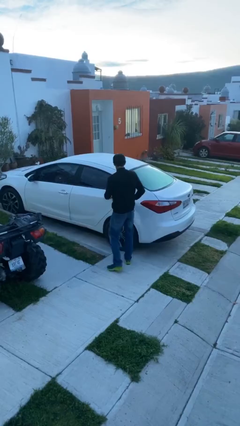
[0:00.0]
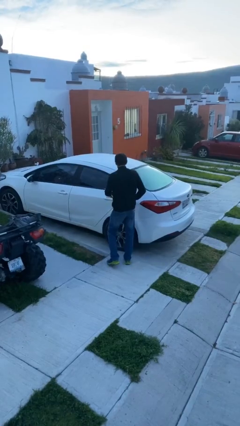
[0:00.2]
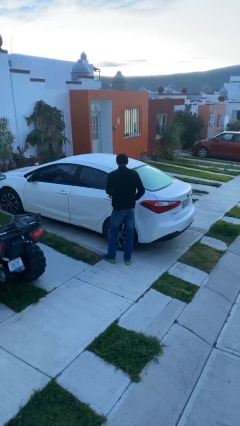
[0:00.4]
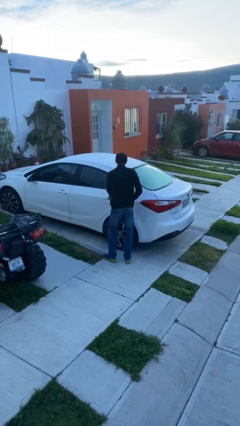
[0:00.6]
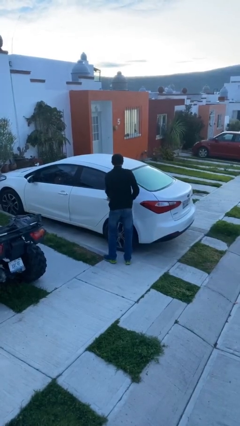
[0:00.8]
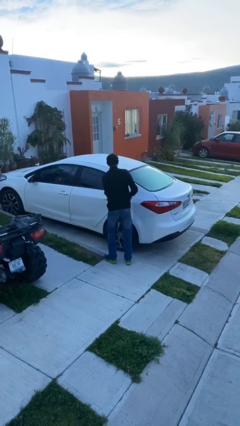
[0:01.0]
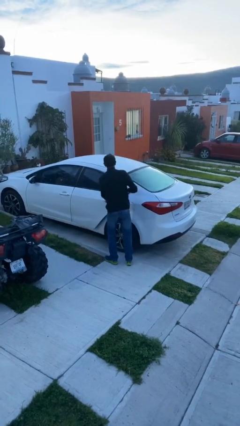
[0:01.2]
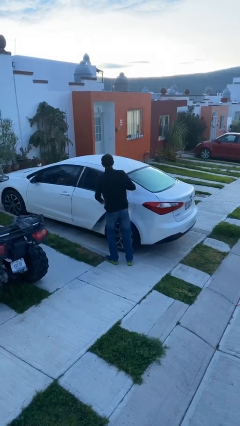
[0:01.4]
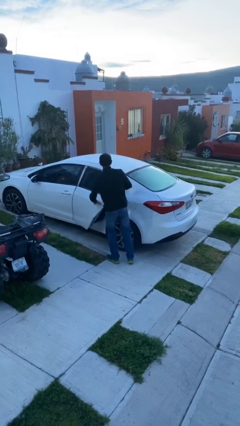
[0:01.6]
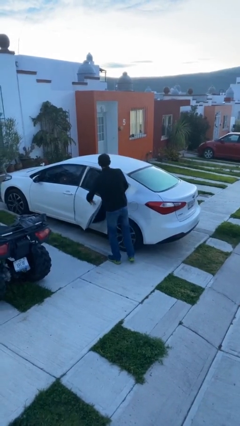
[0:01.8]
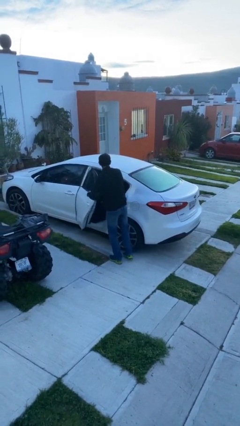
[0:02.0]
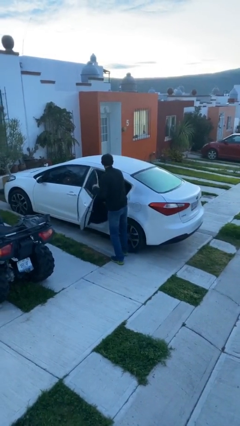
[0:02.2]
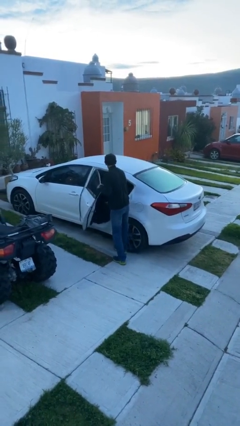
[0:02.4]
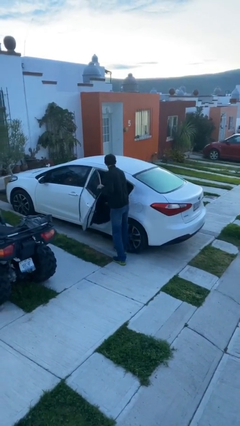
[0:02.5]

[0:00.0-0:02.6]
person opens car door

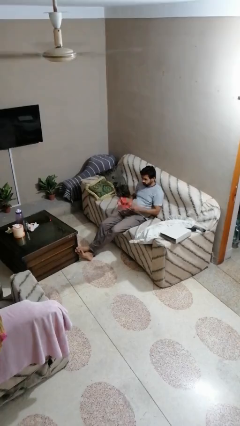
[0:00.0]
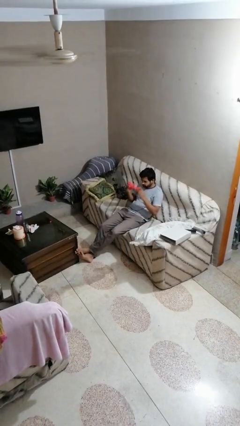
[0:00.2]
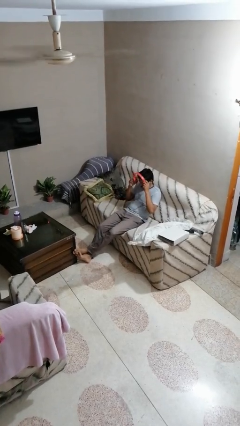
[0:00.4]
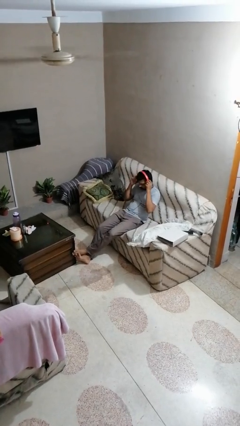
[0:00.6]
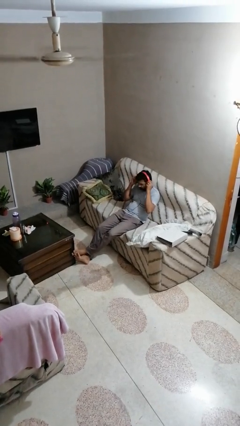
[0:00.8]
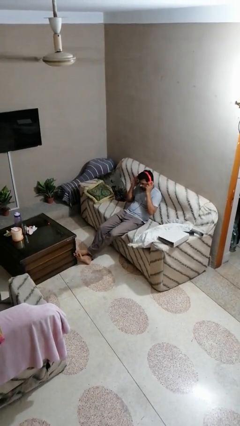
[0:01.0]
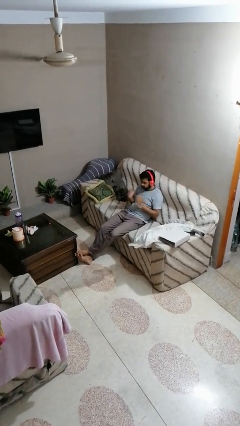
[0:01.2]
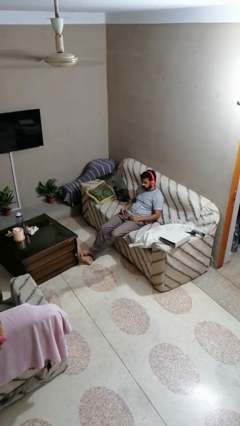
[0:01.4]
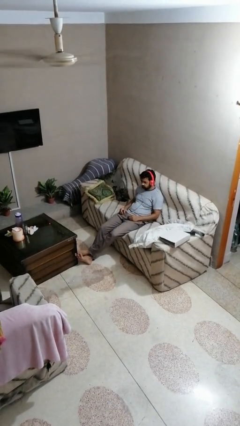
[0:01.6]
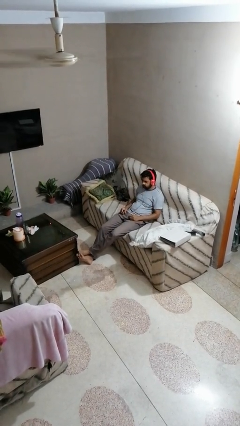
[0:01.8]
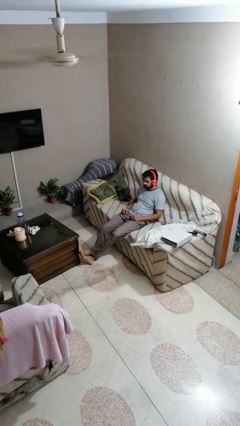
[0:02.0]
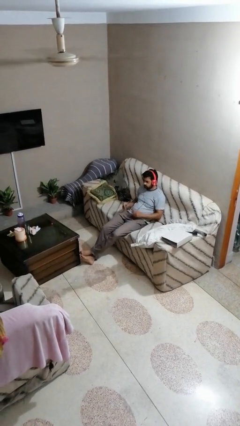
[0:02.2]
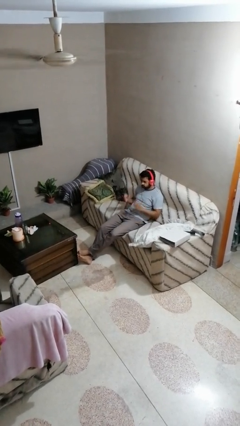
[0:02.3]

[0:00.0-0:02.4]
person puts on headphones

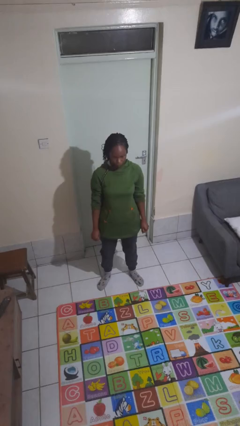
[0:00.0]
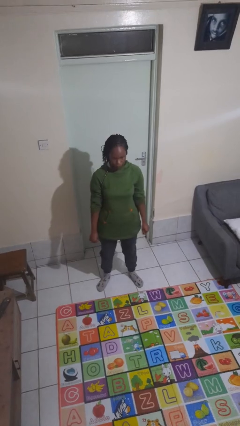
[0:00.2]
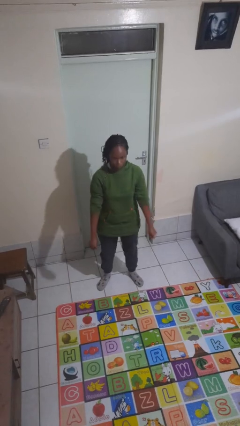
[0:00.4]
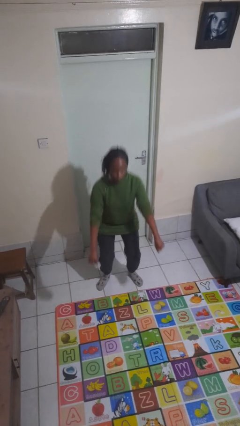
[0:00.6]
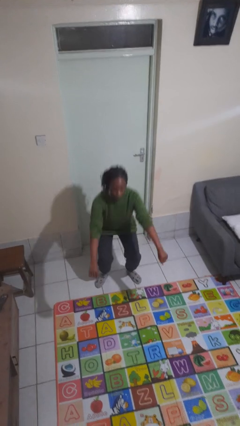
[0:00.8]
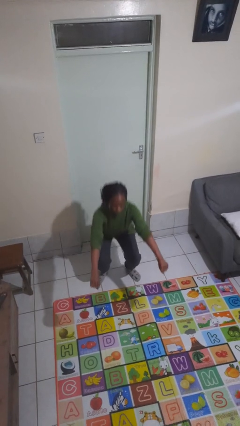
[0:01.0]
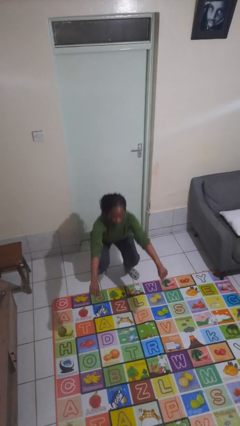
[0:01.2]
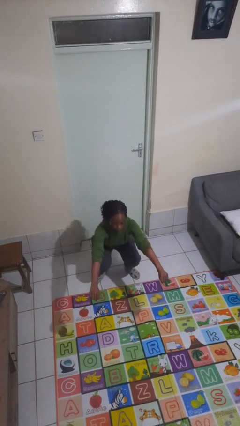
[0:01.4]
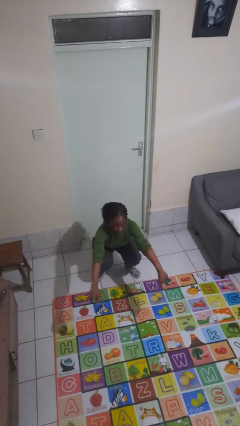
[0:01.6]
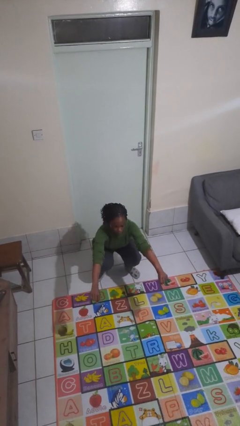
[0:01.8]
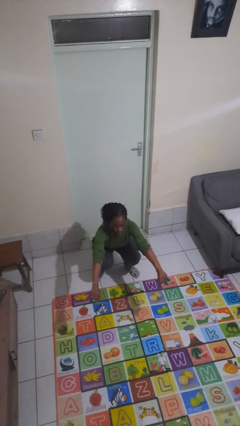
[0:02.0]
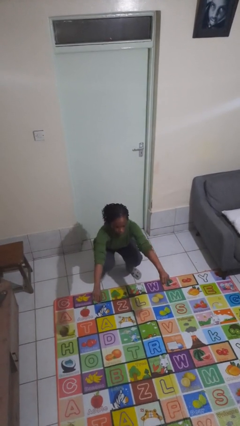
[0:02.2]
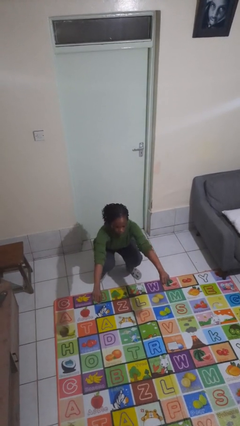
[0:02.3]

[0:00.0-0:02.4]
person squats

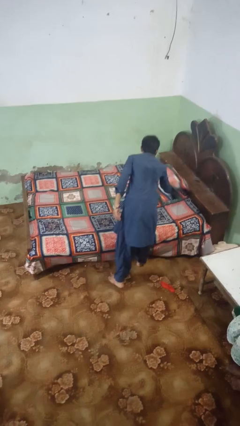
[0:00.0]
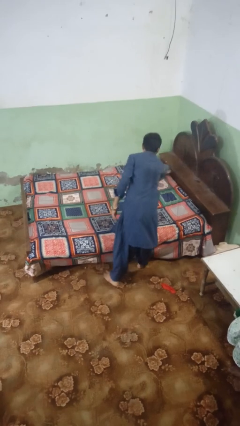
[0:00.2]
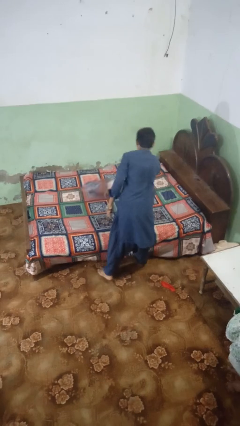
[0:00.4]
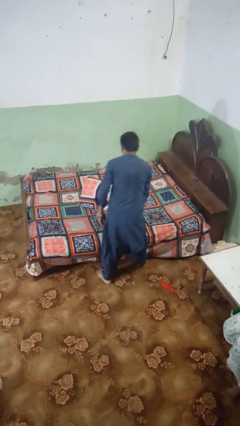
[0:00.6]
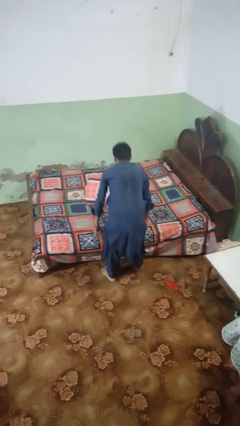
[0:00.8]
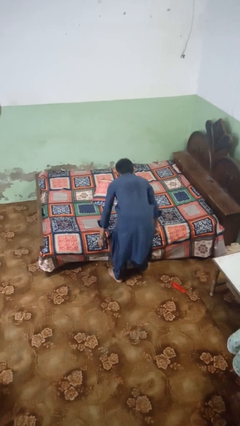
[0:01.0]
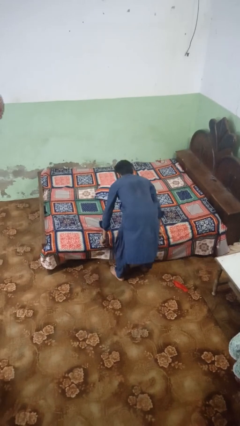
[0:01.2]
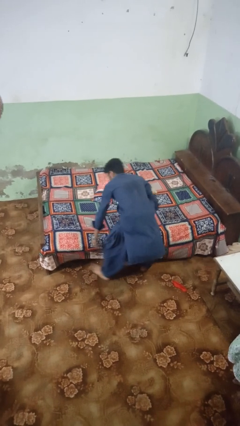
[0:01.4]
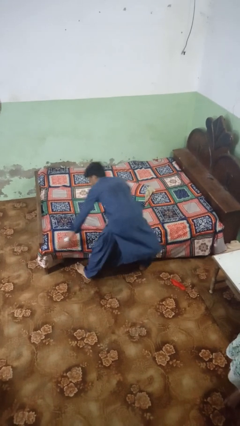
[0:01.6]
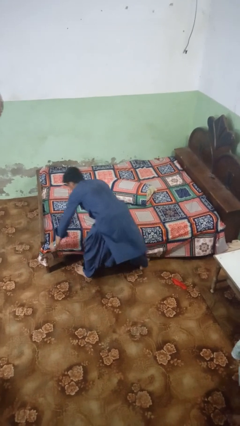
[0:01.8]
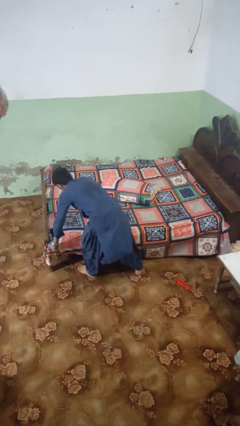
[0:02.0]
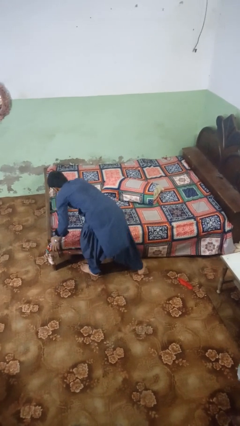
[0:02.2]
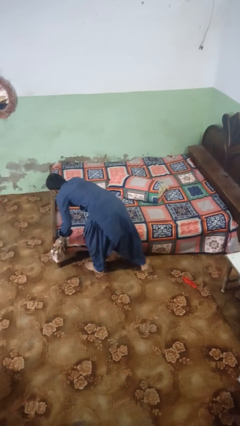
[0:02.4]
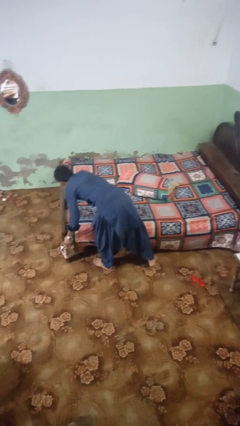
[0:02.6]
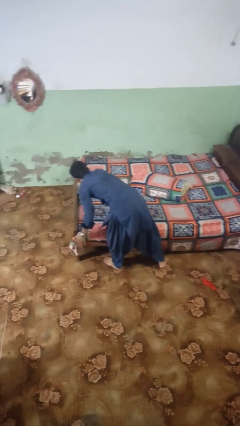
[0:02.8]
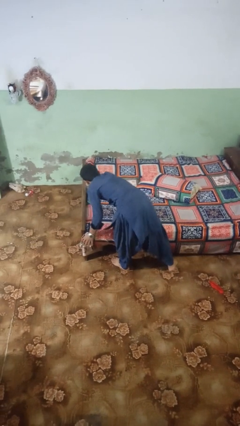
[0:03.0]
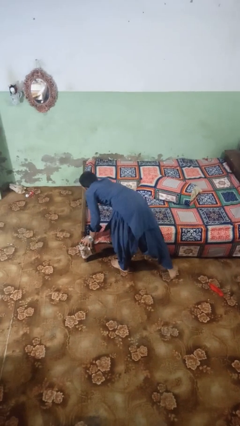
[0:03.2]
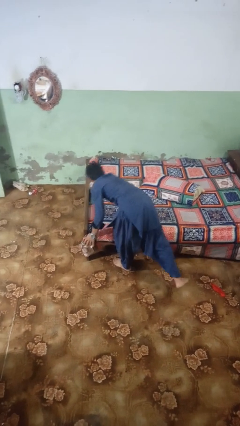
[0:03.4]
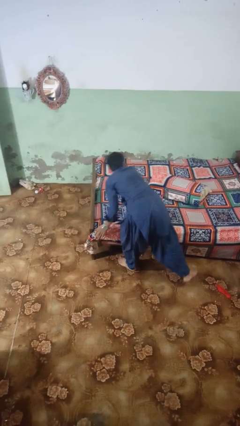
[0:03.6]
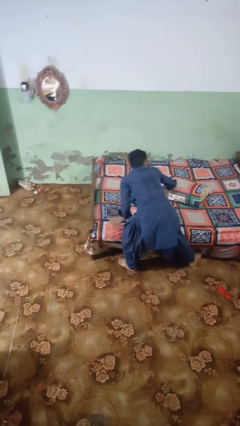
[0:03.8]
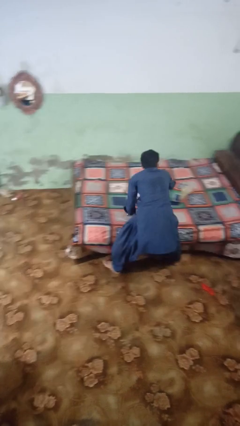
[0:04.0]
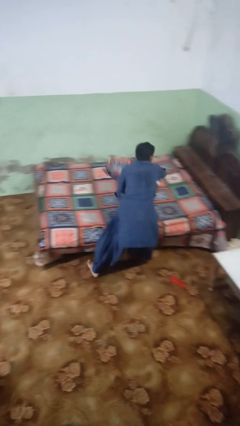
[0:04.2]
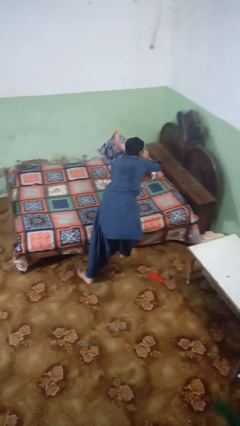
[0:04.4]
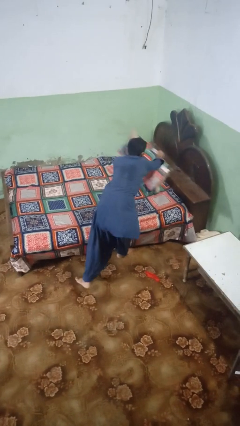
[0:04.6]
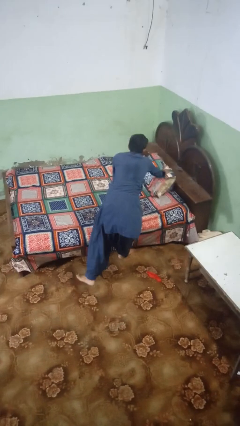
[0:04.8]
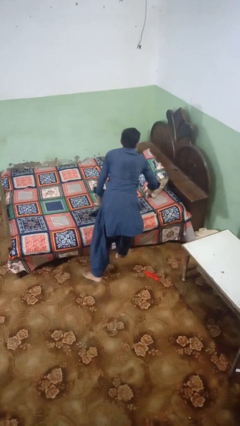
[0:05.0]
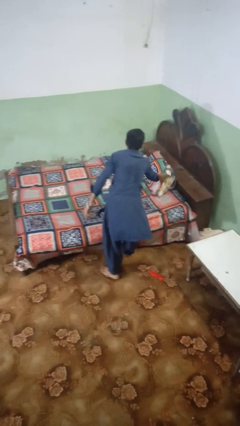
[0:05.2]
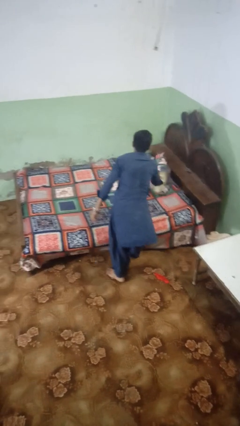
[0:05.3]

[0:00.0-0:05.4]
person makes bed

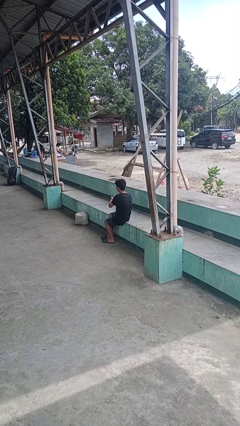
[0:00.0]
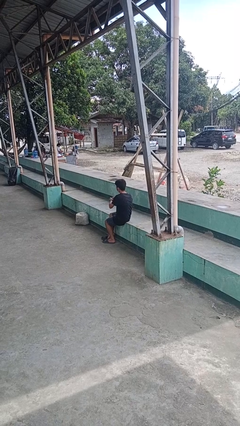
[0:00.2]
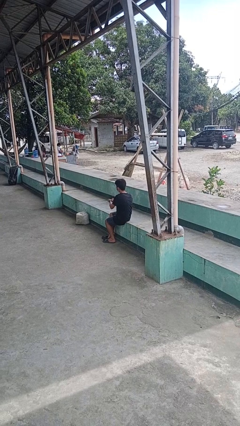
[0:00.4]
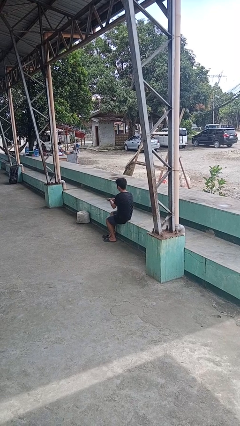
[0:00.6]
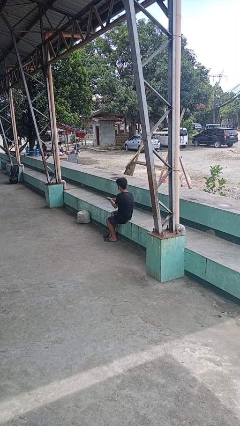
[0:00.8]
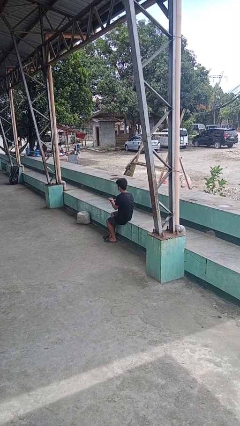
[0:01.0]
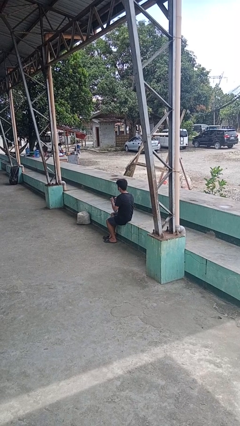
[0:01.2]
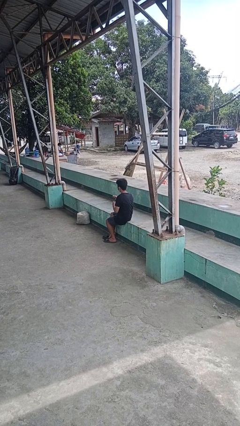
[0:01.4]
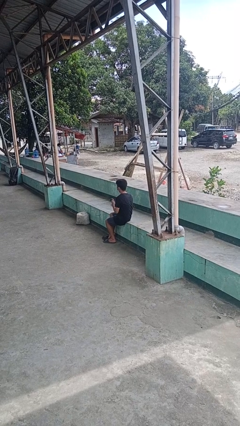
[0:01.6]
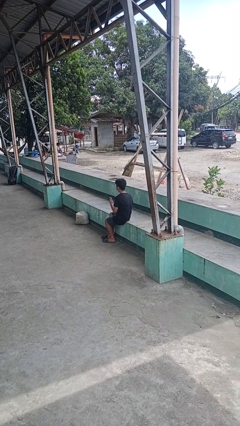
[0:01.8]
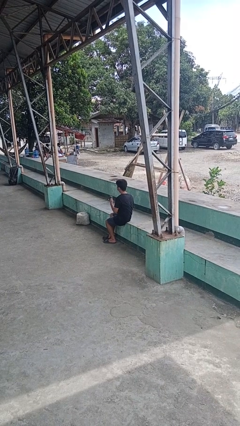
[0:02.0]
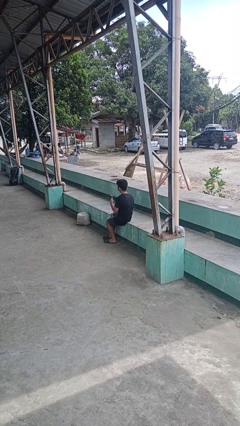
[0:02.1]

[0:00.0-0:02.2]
person takes off wristwatch

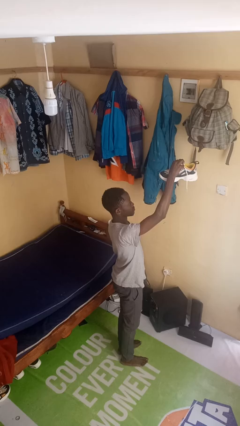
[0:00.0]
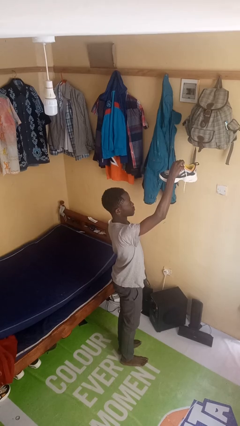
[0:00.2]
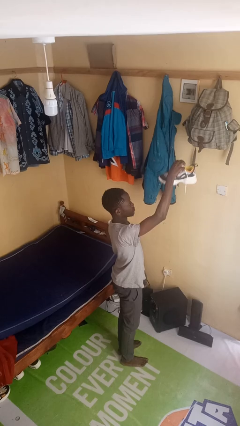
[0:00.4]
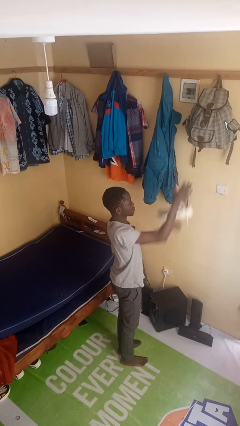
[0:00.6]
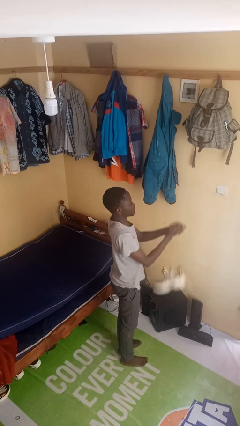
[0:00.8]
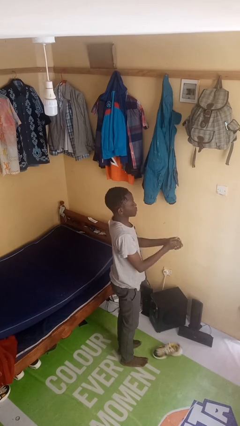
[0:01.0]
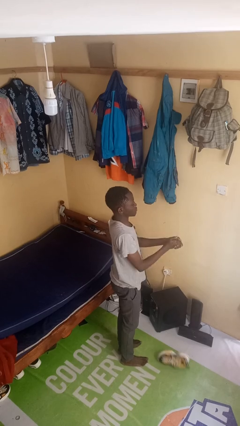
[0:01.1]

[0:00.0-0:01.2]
person drops object

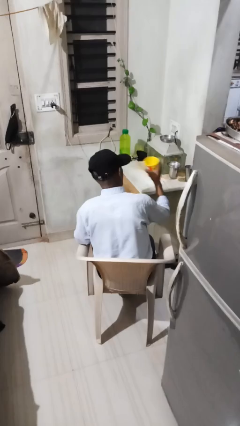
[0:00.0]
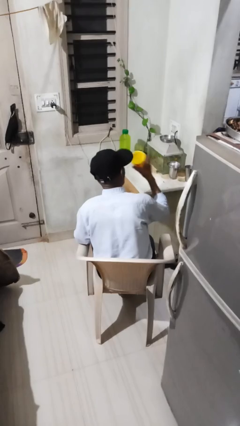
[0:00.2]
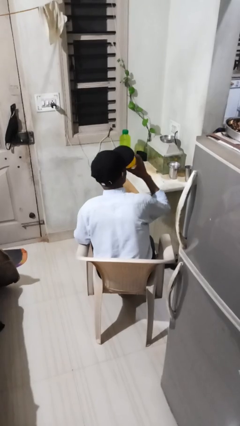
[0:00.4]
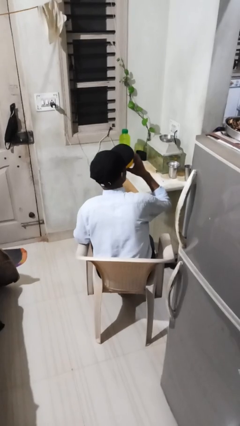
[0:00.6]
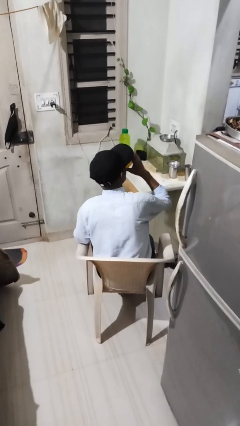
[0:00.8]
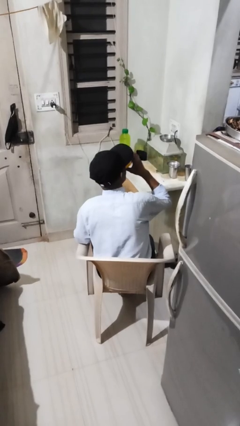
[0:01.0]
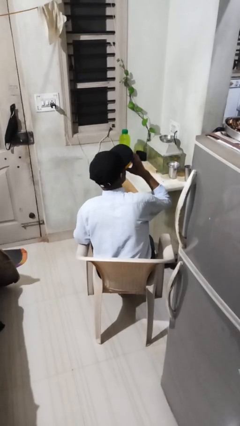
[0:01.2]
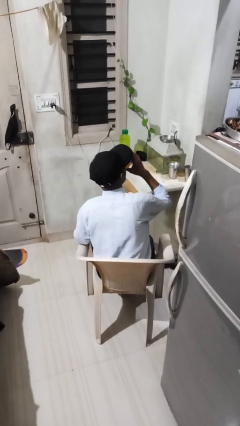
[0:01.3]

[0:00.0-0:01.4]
person drinks from mug
